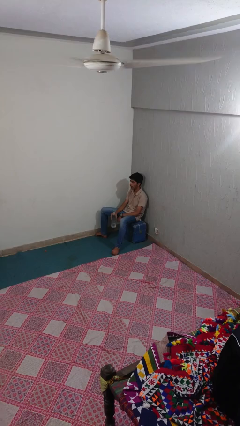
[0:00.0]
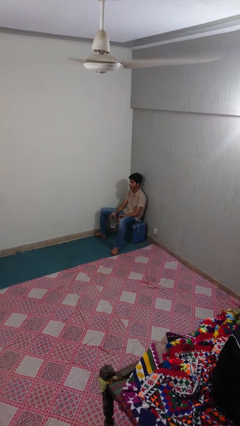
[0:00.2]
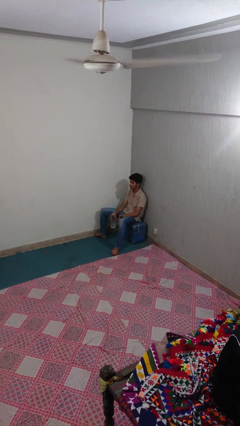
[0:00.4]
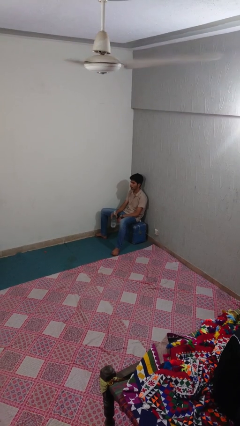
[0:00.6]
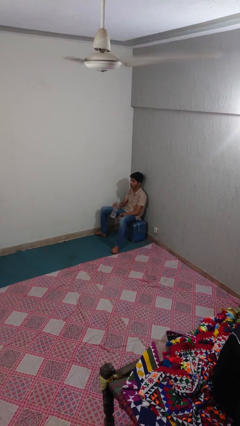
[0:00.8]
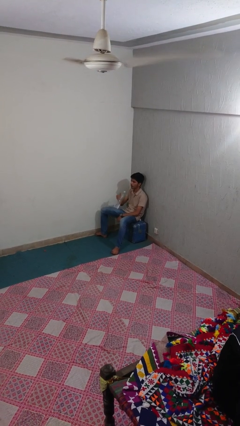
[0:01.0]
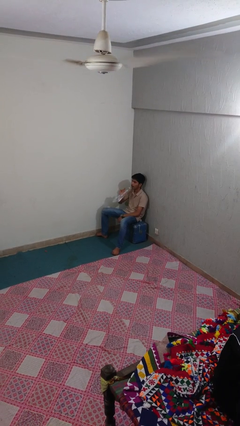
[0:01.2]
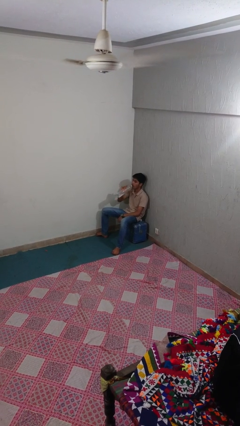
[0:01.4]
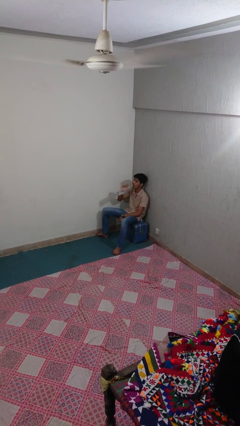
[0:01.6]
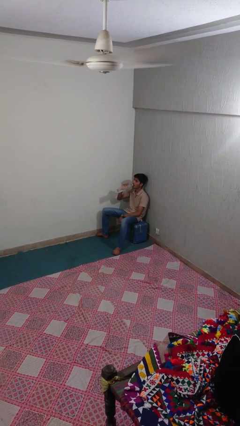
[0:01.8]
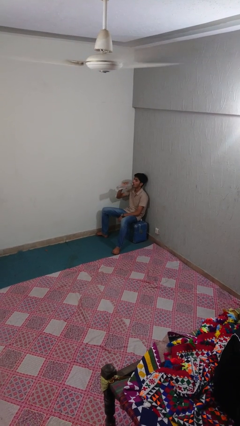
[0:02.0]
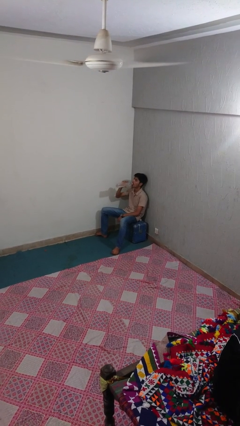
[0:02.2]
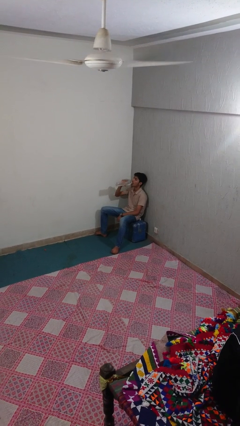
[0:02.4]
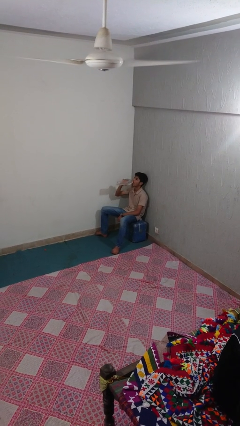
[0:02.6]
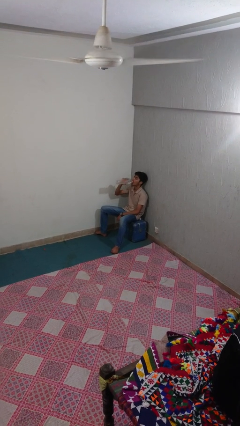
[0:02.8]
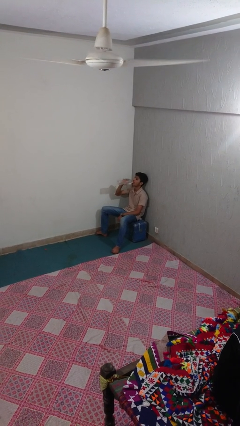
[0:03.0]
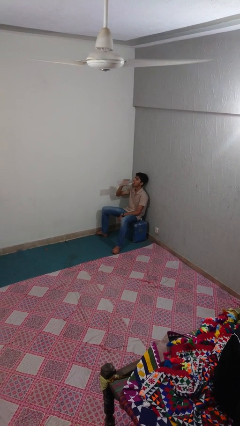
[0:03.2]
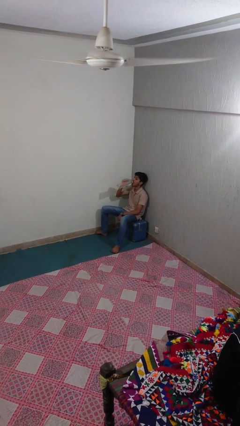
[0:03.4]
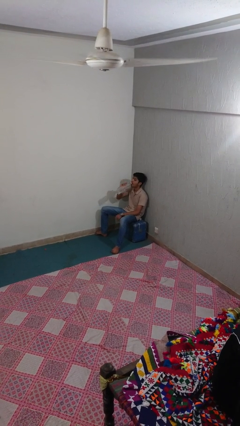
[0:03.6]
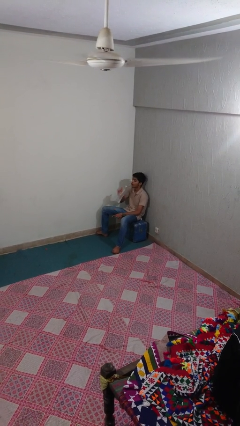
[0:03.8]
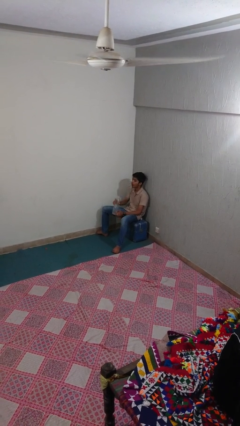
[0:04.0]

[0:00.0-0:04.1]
person drinks from bottle

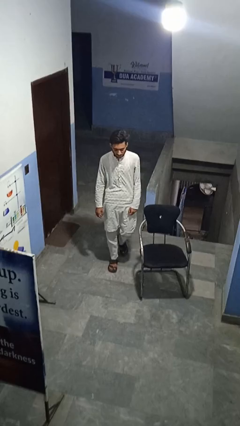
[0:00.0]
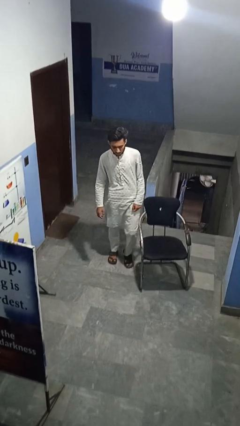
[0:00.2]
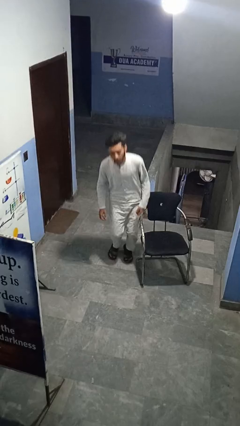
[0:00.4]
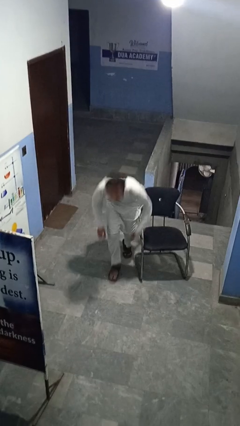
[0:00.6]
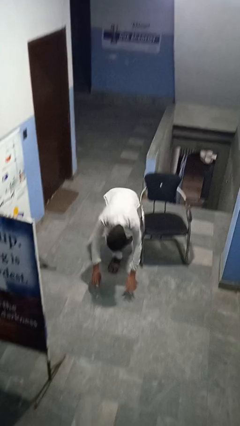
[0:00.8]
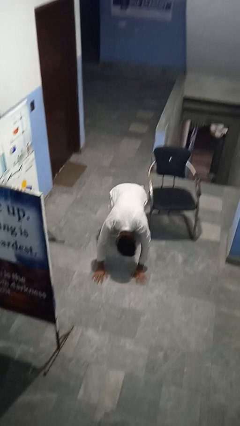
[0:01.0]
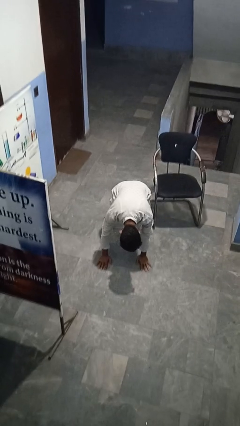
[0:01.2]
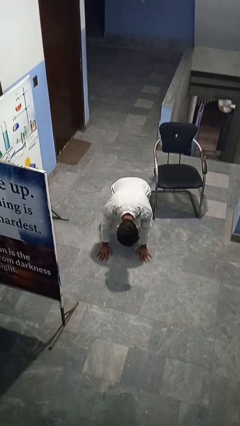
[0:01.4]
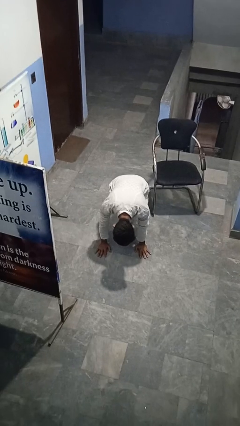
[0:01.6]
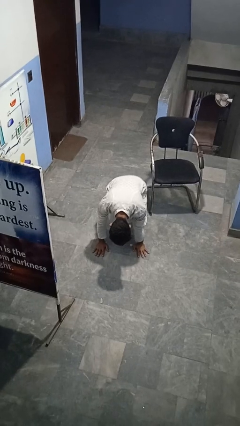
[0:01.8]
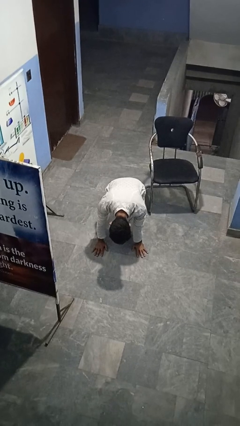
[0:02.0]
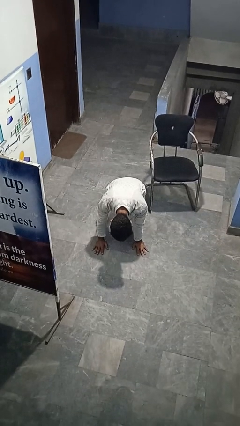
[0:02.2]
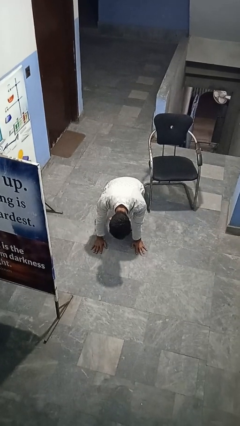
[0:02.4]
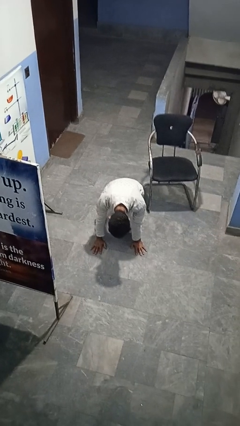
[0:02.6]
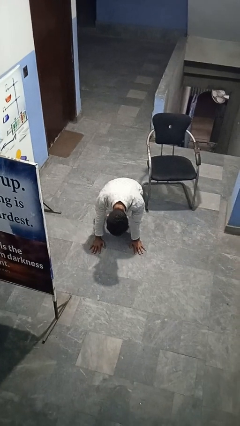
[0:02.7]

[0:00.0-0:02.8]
person trips on object on floor

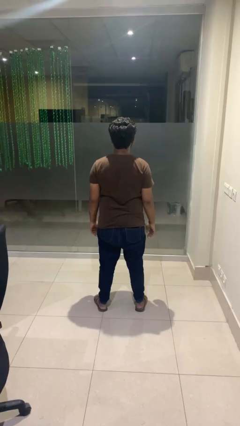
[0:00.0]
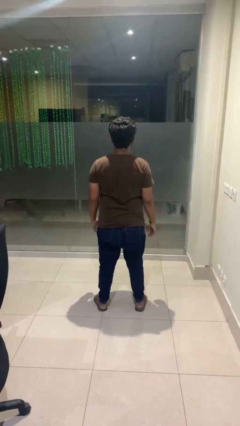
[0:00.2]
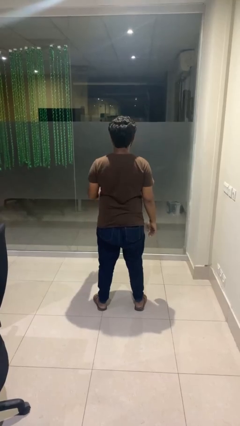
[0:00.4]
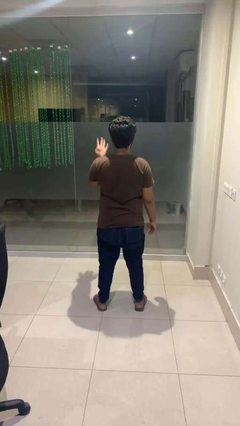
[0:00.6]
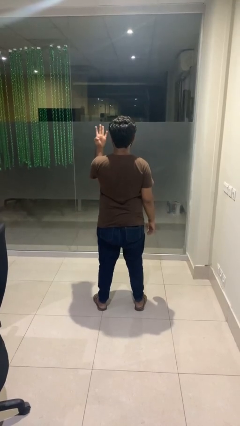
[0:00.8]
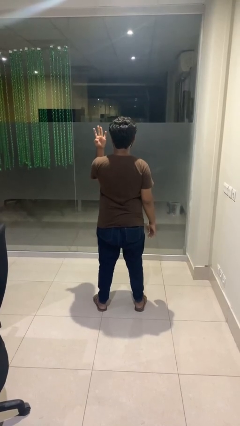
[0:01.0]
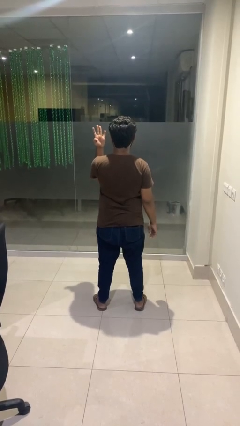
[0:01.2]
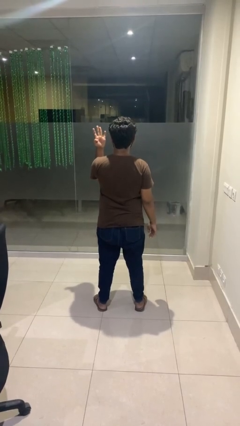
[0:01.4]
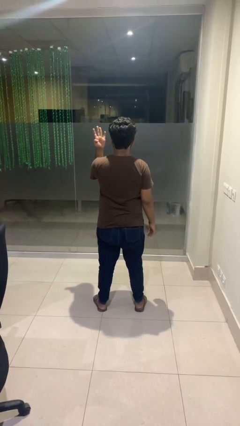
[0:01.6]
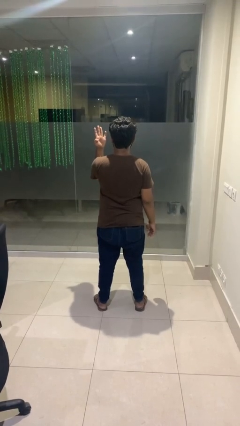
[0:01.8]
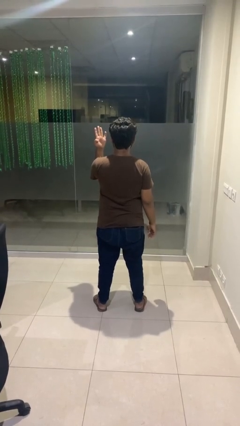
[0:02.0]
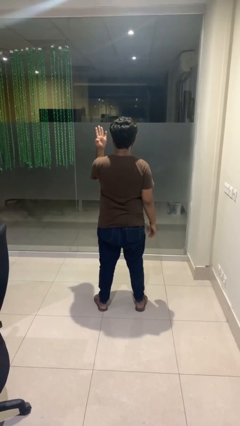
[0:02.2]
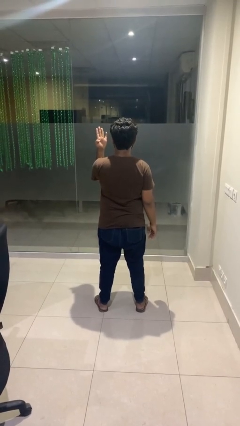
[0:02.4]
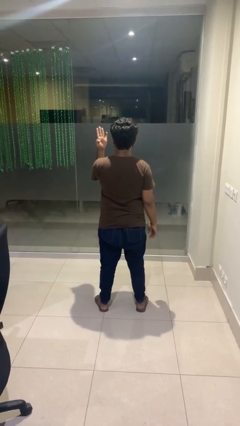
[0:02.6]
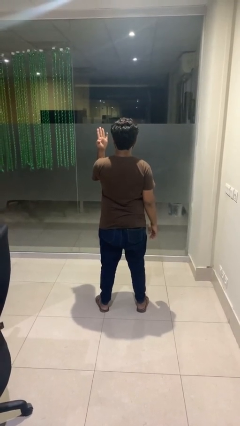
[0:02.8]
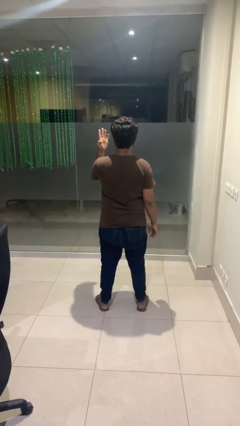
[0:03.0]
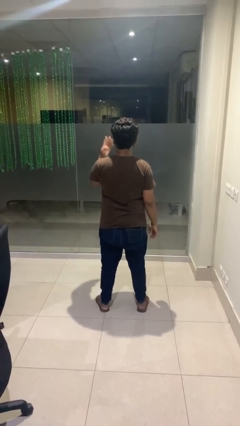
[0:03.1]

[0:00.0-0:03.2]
person gestures number four

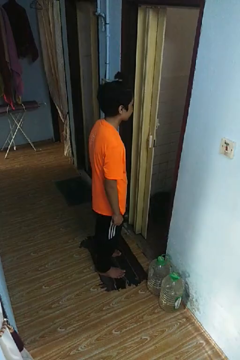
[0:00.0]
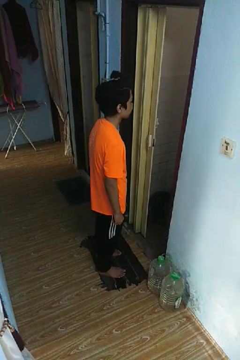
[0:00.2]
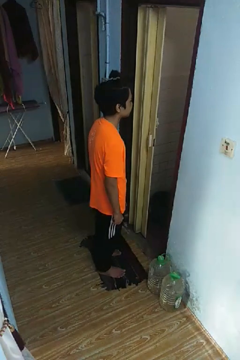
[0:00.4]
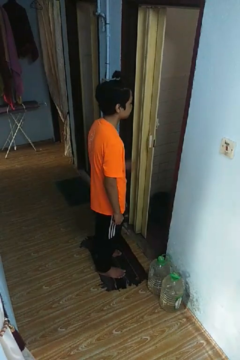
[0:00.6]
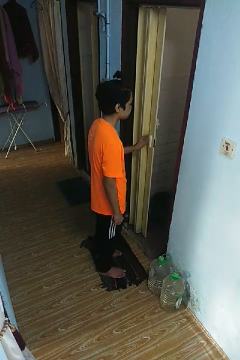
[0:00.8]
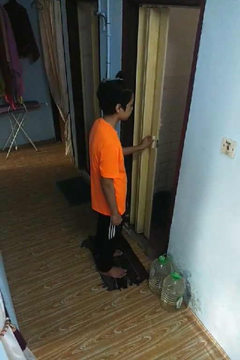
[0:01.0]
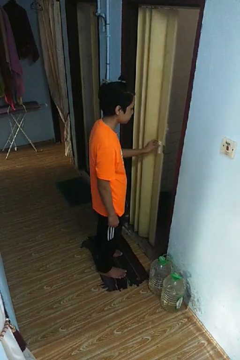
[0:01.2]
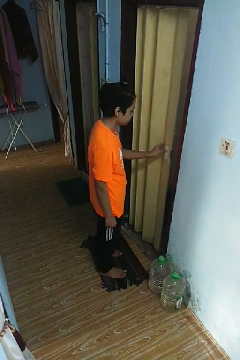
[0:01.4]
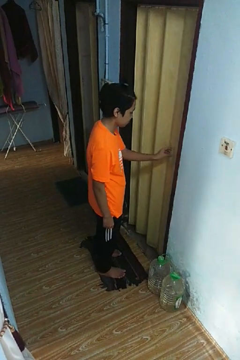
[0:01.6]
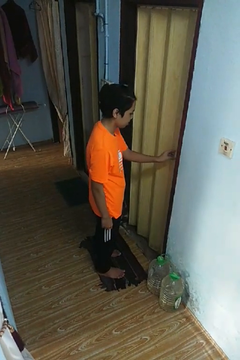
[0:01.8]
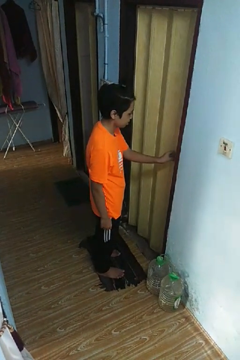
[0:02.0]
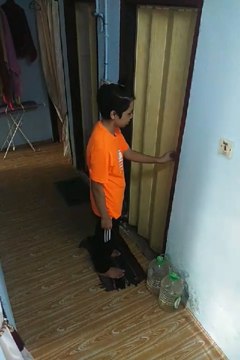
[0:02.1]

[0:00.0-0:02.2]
person closes sliding door

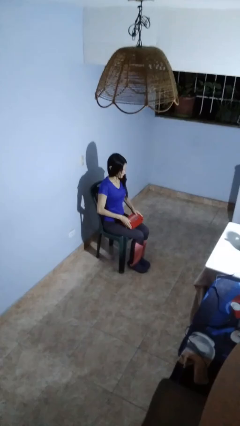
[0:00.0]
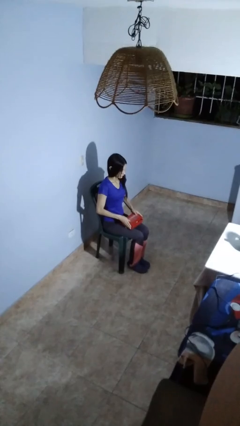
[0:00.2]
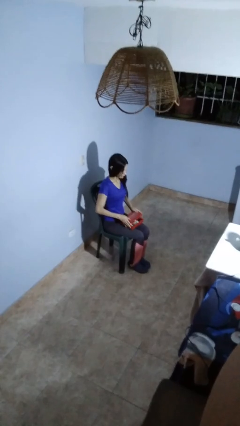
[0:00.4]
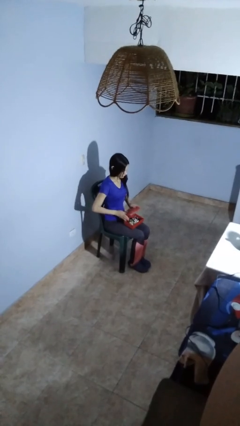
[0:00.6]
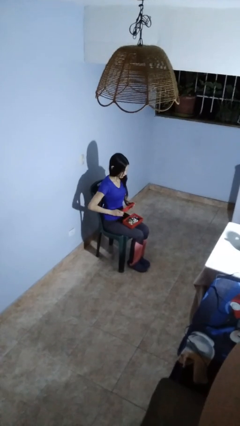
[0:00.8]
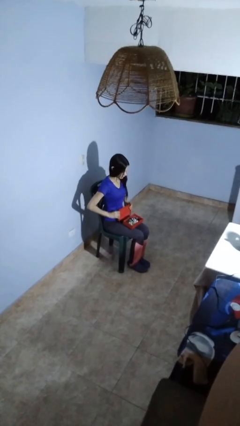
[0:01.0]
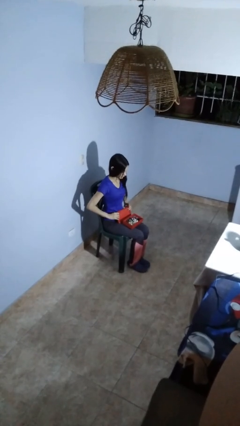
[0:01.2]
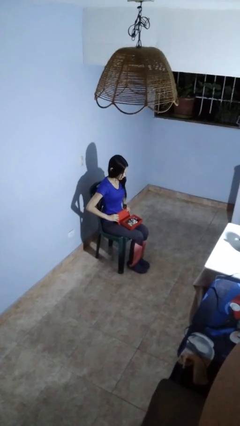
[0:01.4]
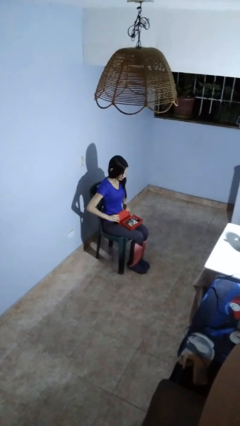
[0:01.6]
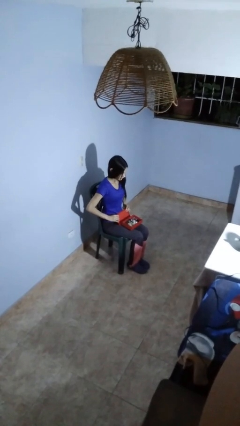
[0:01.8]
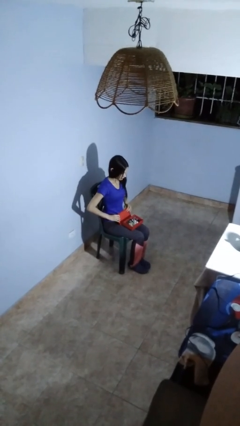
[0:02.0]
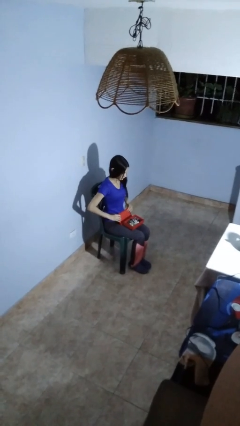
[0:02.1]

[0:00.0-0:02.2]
person opens jewelry box

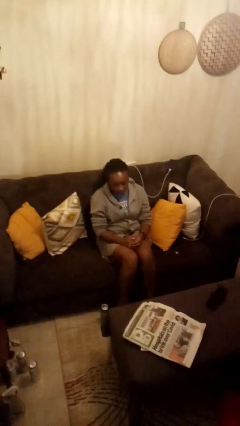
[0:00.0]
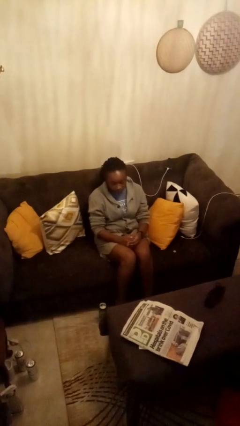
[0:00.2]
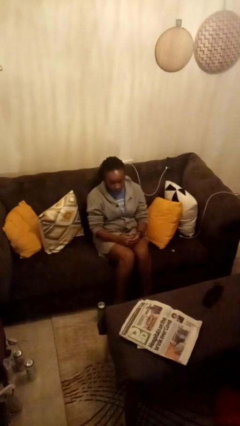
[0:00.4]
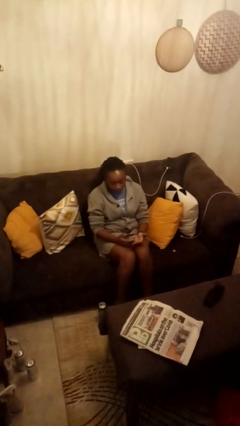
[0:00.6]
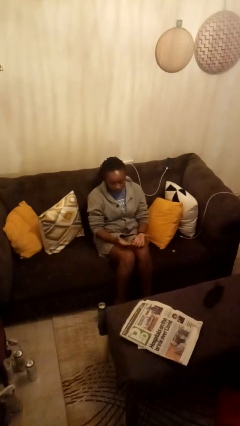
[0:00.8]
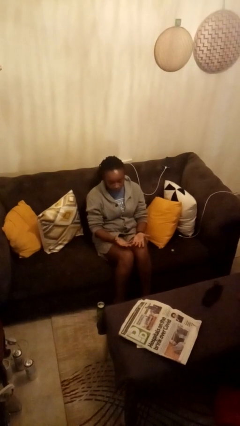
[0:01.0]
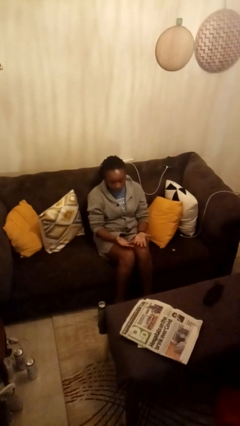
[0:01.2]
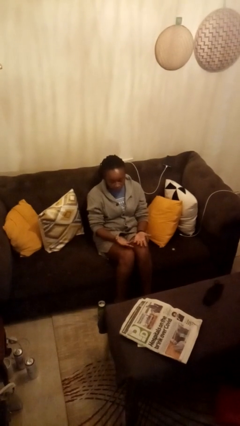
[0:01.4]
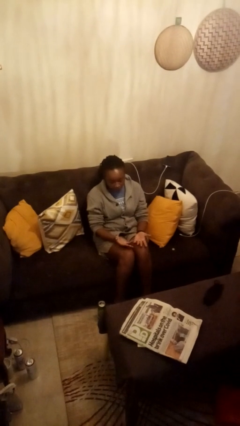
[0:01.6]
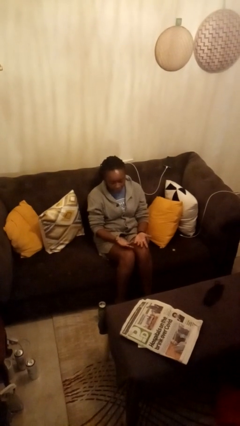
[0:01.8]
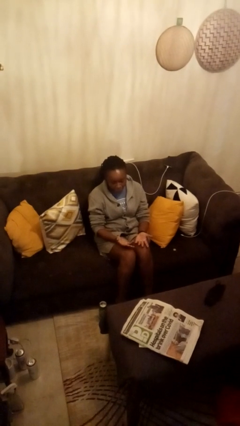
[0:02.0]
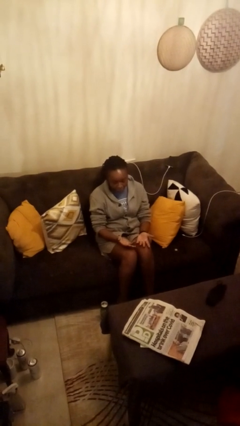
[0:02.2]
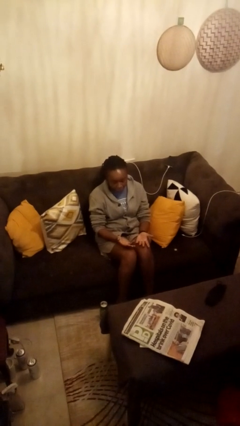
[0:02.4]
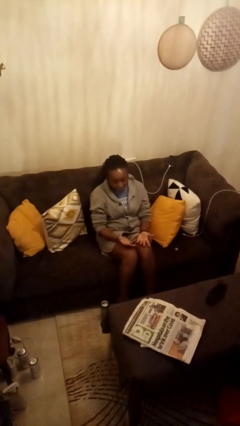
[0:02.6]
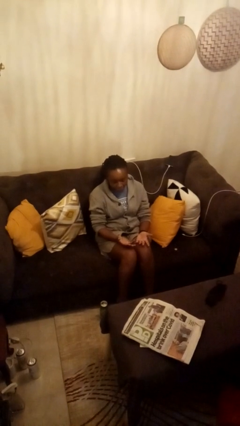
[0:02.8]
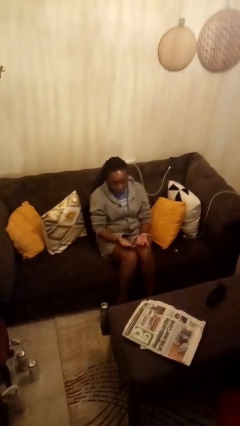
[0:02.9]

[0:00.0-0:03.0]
person looks at hands in lap

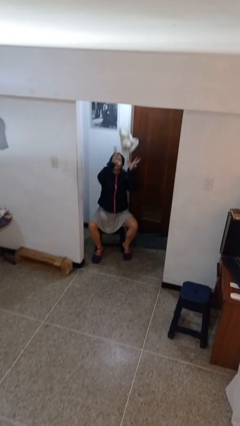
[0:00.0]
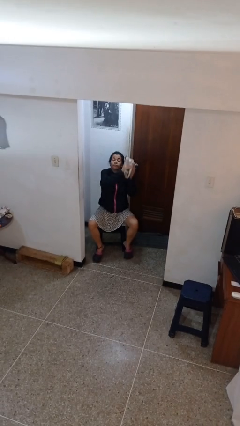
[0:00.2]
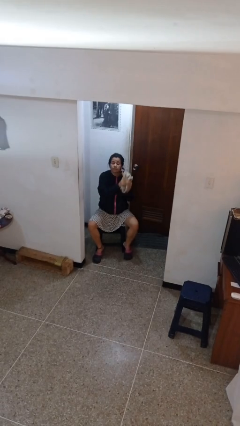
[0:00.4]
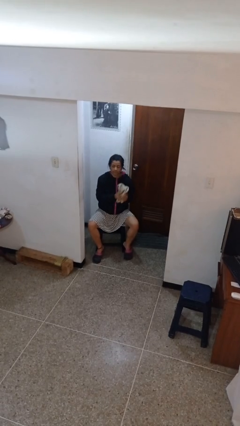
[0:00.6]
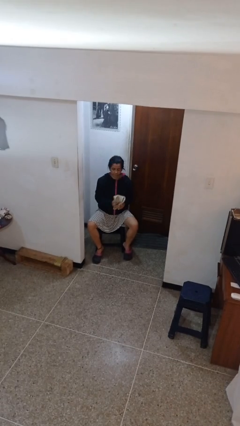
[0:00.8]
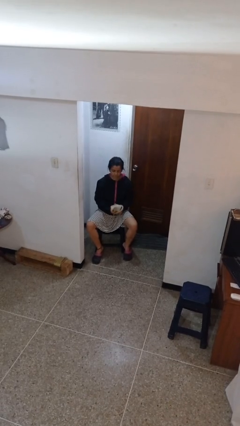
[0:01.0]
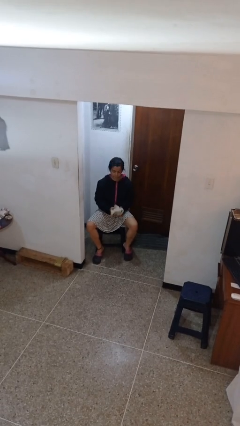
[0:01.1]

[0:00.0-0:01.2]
person catches dropped object
